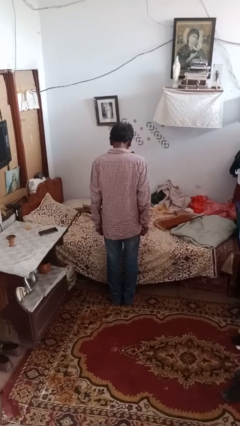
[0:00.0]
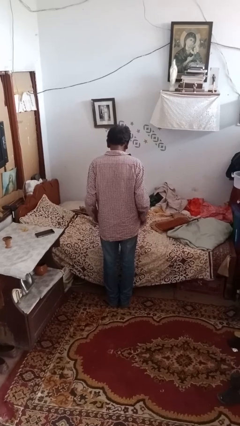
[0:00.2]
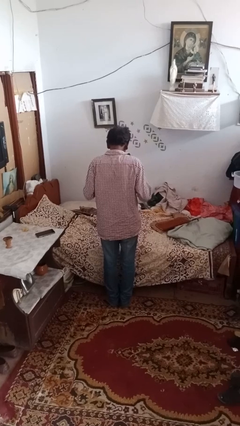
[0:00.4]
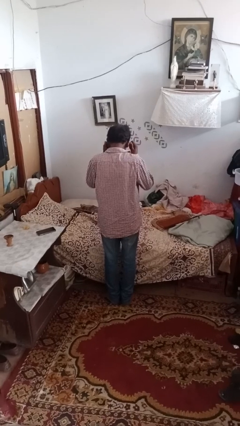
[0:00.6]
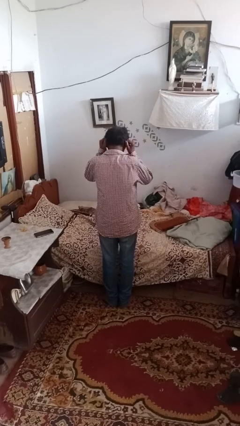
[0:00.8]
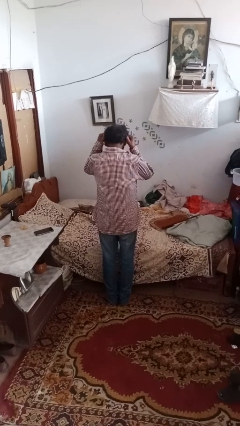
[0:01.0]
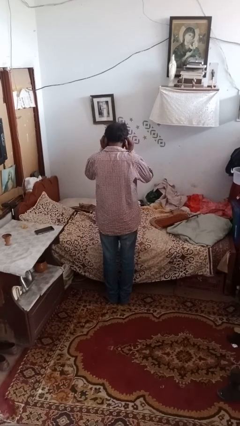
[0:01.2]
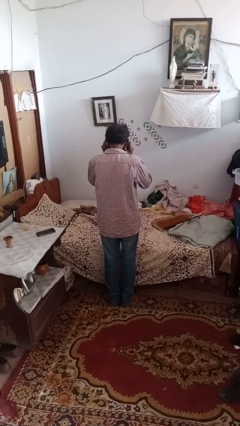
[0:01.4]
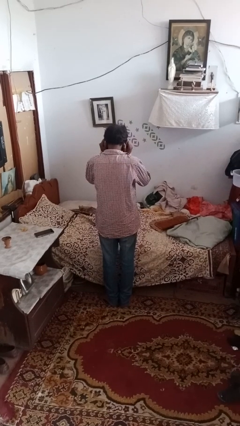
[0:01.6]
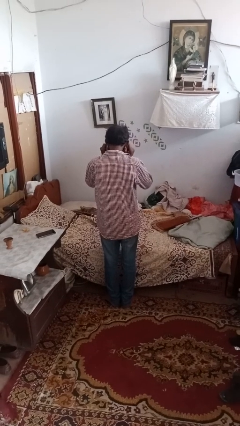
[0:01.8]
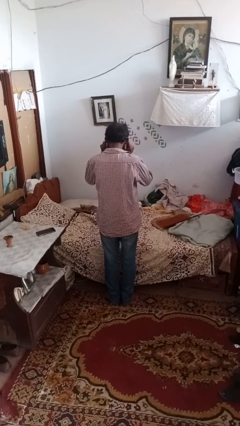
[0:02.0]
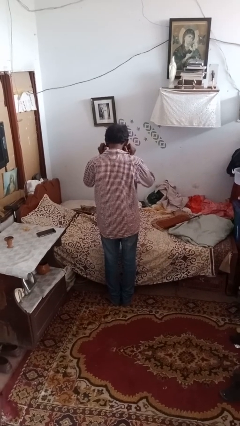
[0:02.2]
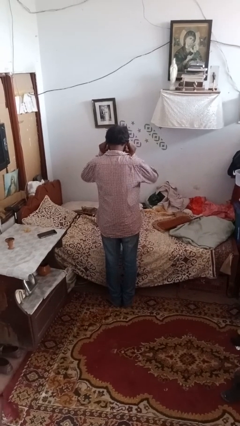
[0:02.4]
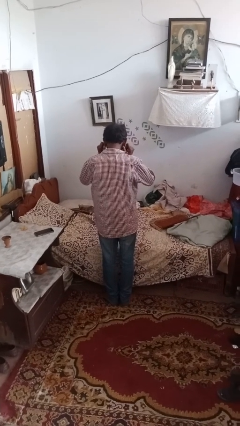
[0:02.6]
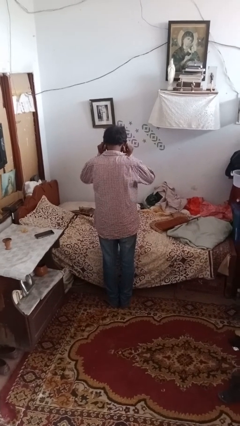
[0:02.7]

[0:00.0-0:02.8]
person touches earlobe

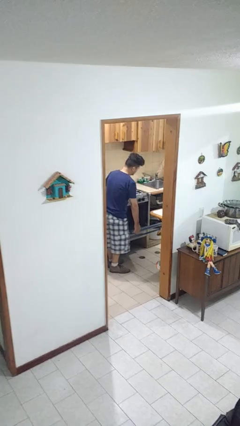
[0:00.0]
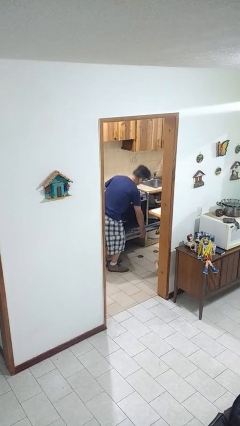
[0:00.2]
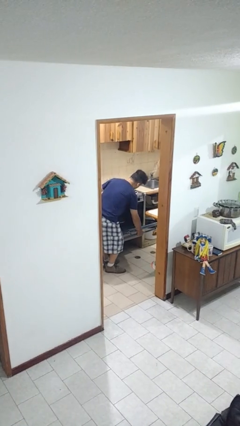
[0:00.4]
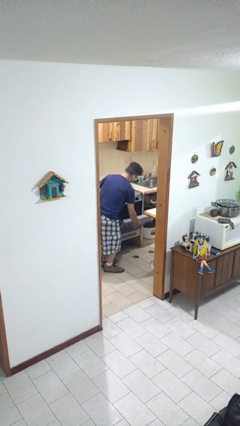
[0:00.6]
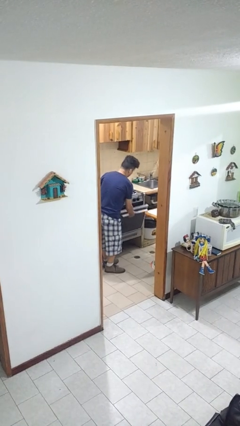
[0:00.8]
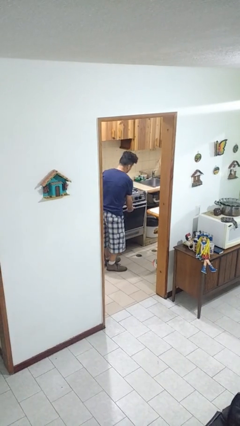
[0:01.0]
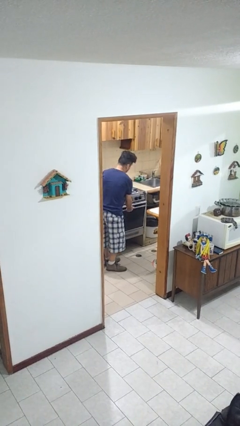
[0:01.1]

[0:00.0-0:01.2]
person closes oven door

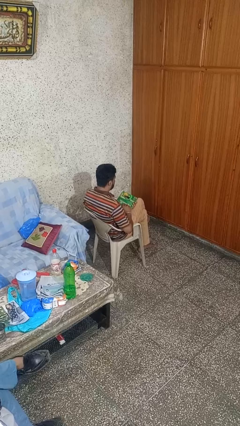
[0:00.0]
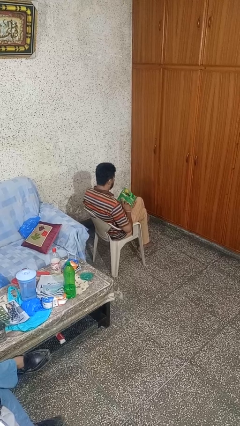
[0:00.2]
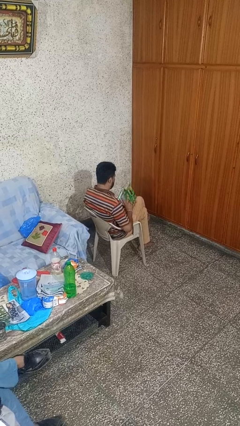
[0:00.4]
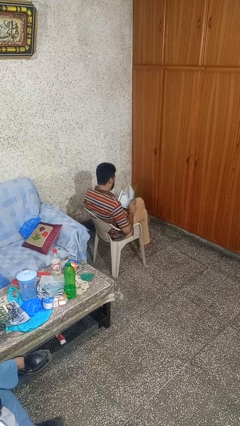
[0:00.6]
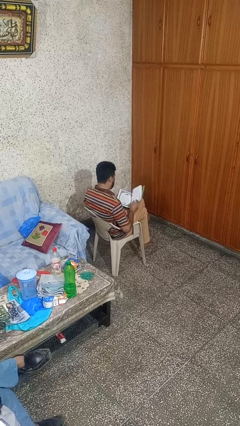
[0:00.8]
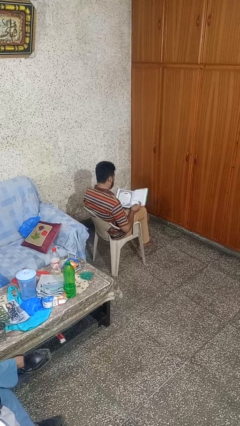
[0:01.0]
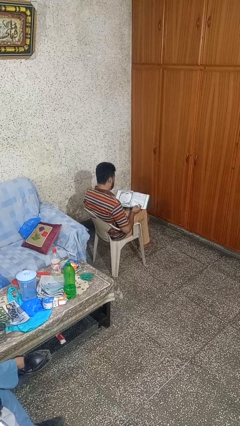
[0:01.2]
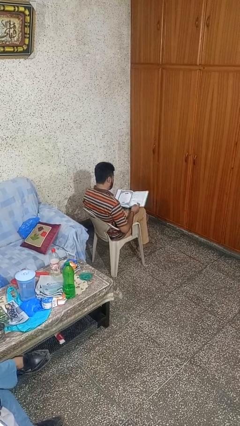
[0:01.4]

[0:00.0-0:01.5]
person reads book

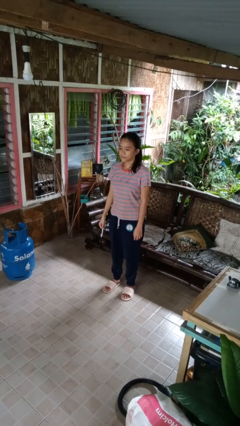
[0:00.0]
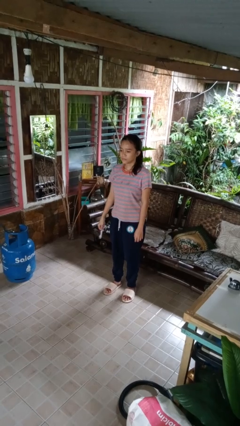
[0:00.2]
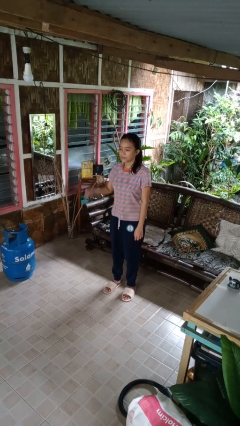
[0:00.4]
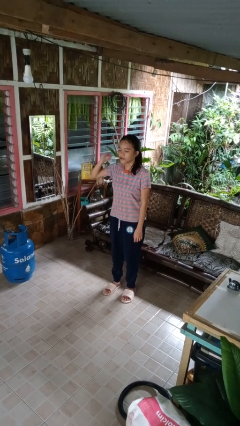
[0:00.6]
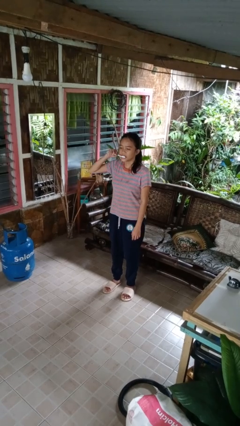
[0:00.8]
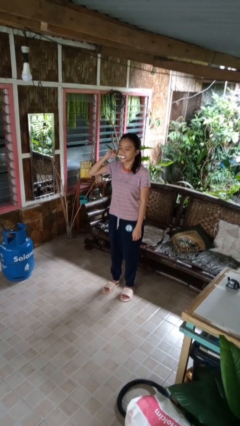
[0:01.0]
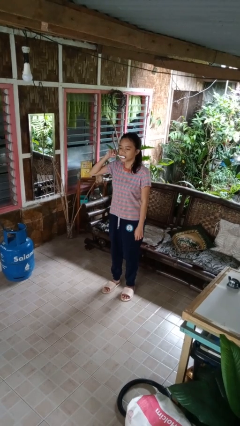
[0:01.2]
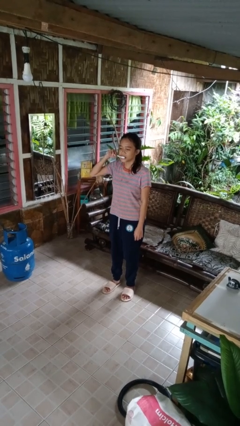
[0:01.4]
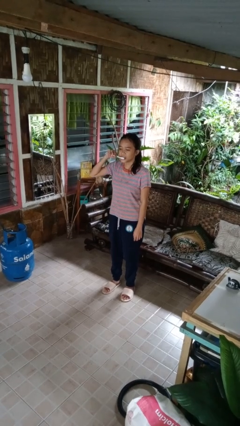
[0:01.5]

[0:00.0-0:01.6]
person brushes teeth

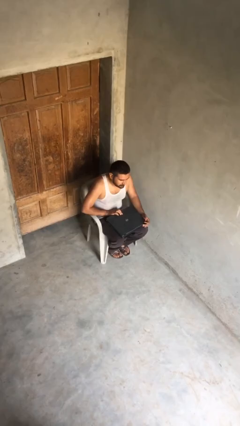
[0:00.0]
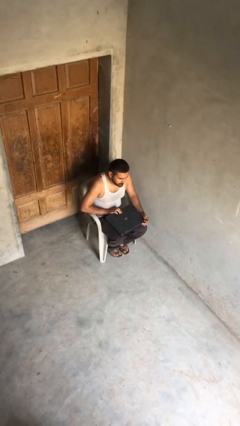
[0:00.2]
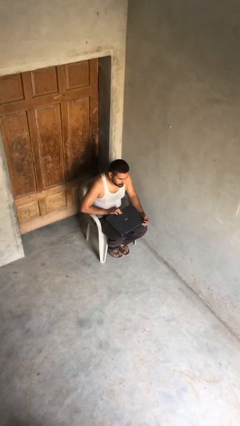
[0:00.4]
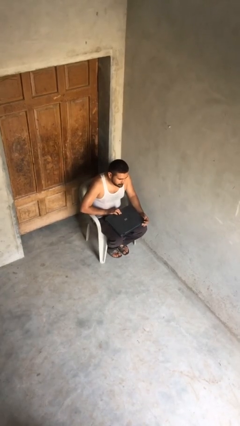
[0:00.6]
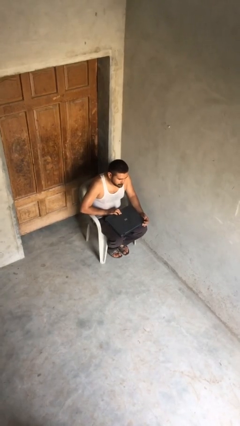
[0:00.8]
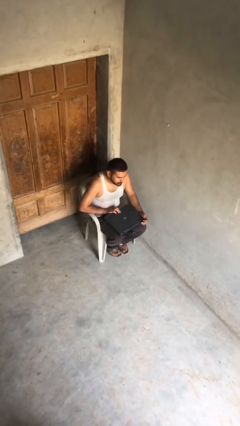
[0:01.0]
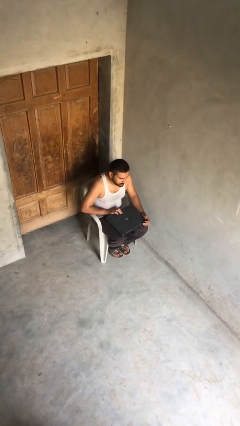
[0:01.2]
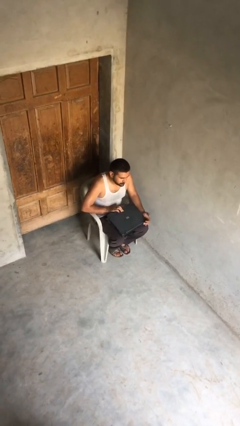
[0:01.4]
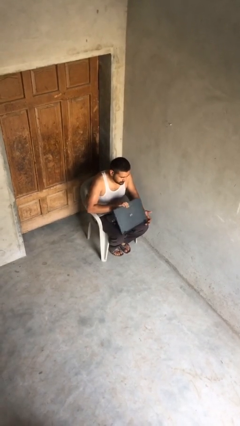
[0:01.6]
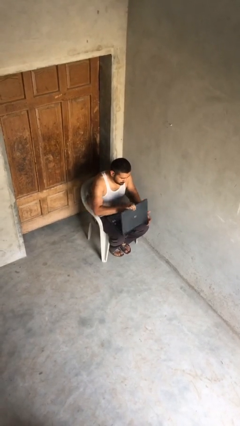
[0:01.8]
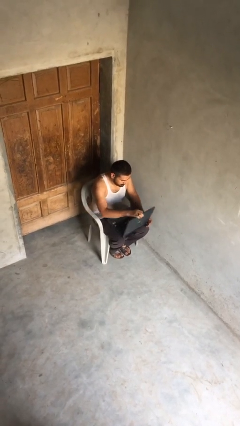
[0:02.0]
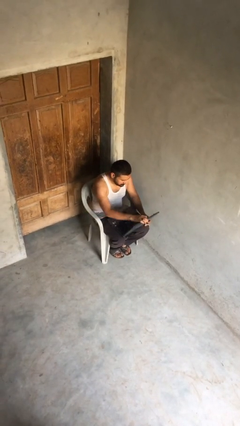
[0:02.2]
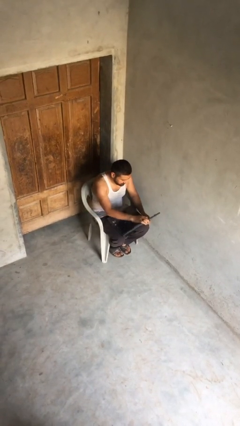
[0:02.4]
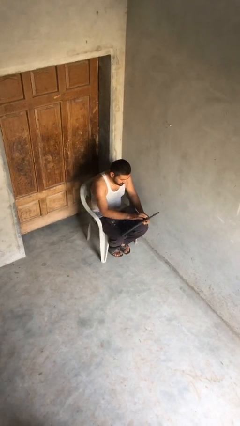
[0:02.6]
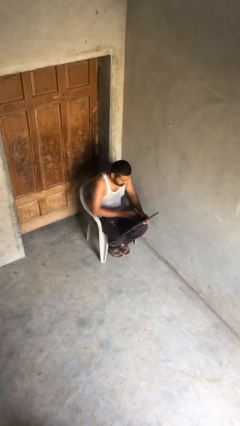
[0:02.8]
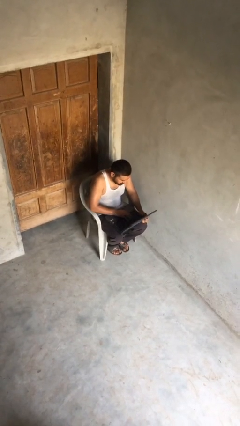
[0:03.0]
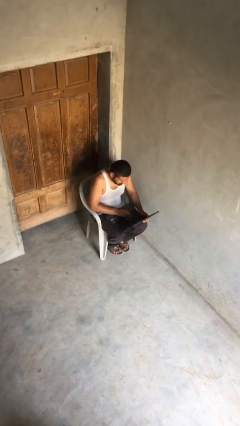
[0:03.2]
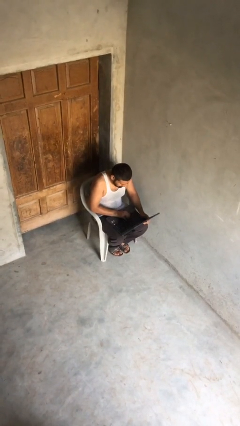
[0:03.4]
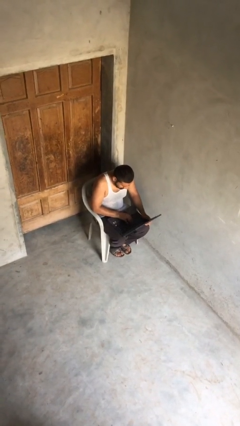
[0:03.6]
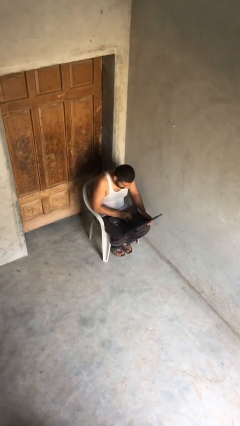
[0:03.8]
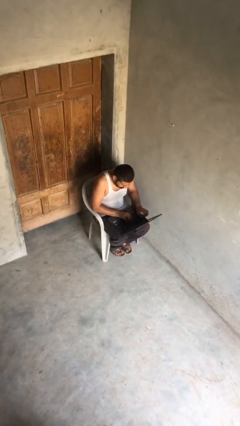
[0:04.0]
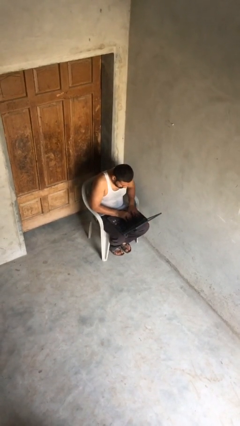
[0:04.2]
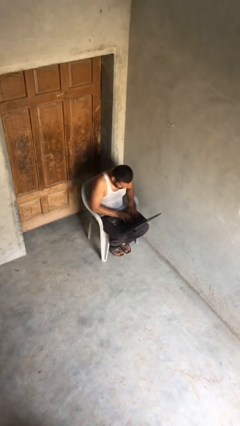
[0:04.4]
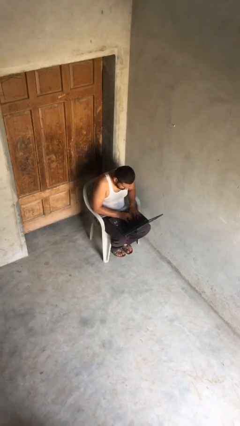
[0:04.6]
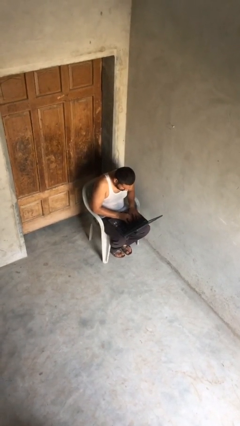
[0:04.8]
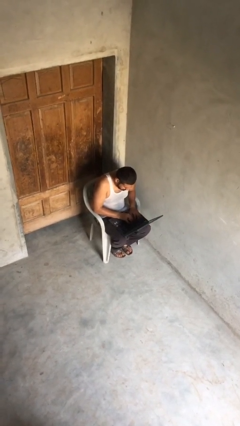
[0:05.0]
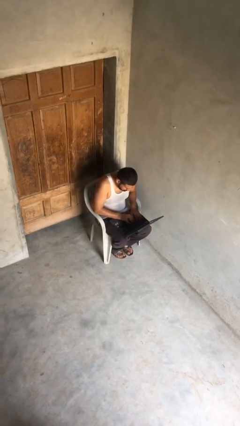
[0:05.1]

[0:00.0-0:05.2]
person interacts with laptop

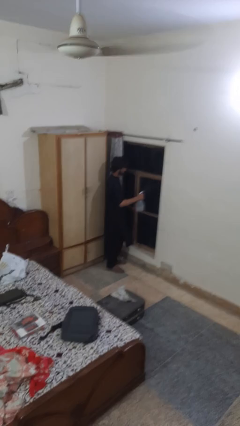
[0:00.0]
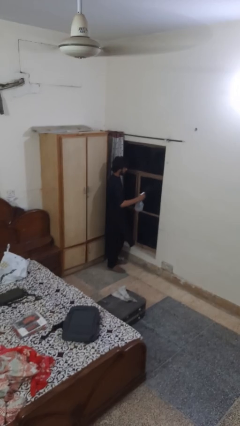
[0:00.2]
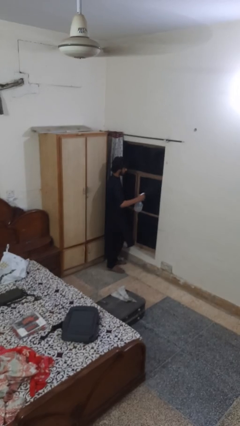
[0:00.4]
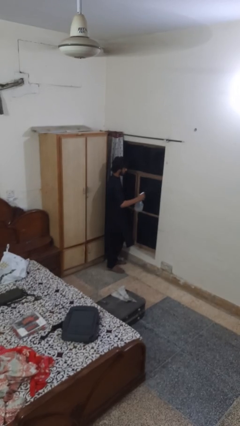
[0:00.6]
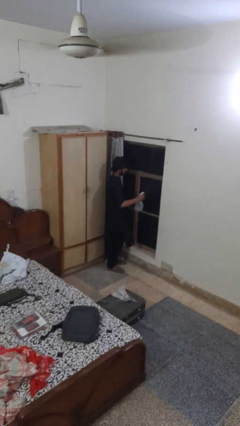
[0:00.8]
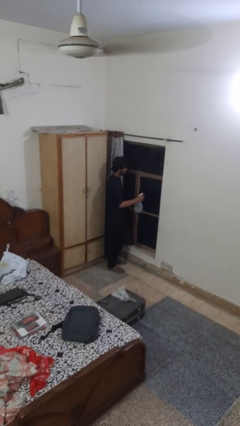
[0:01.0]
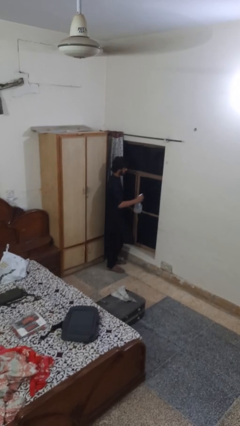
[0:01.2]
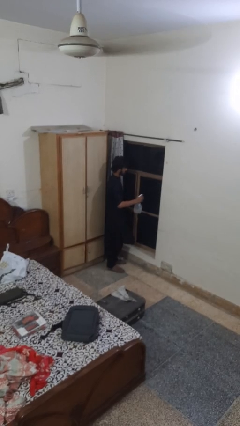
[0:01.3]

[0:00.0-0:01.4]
person sprays from bottle

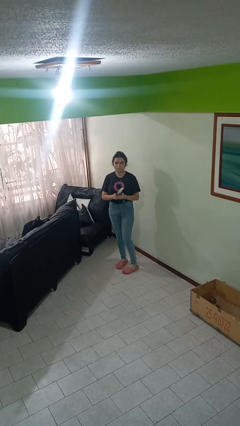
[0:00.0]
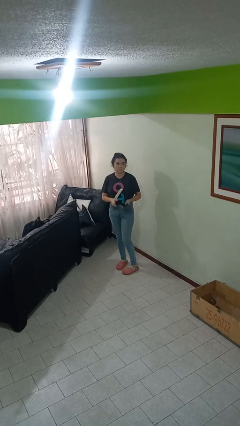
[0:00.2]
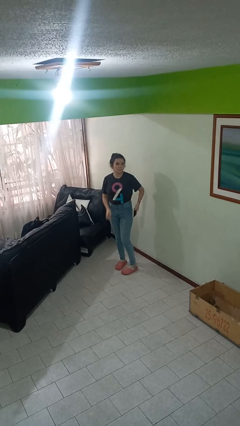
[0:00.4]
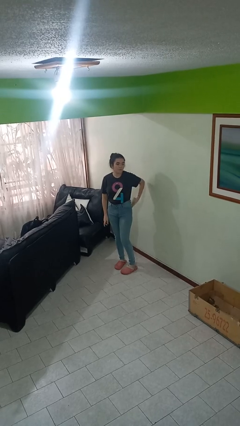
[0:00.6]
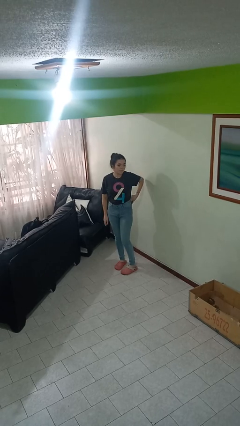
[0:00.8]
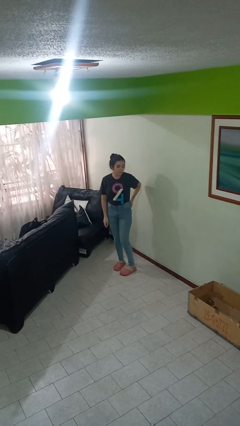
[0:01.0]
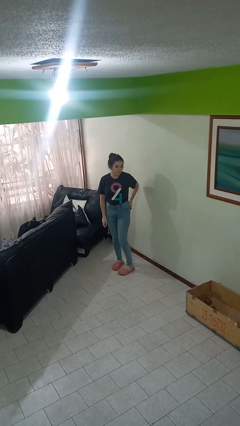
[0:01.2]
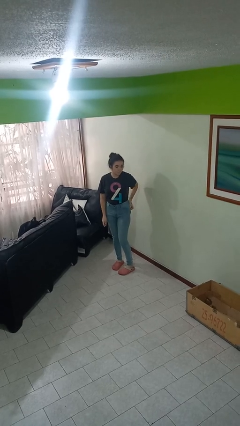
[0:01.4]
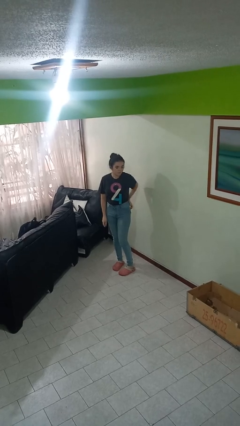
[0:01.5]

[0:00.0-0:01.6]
person puts phone into pocket

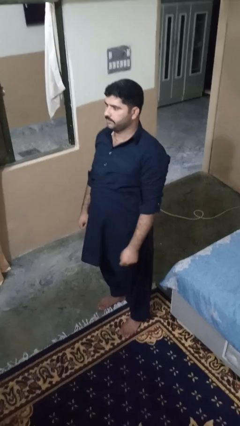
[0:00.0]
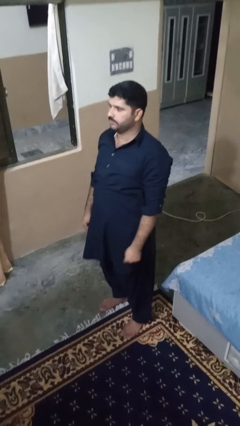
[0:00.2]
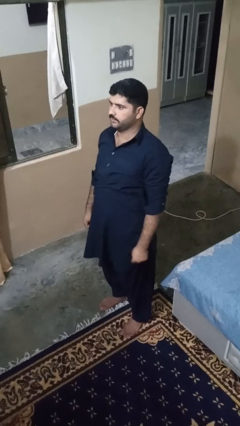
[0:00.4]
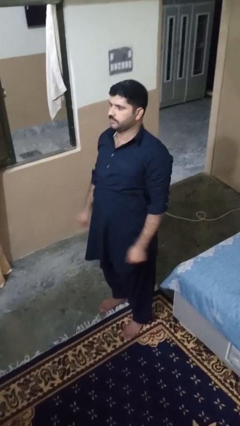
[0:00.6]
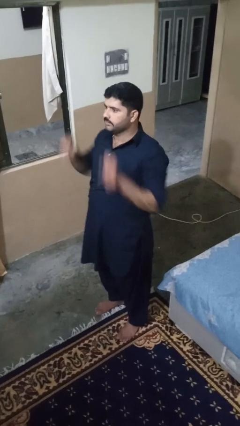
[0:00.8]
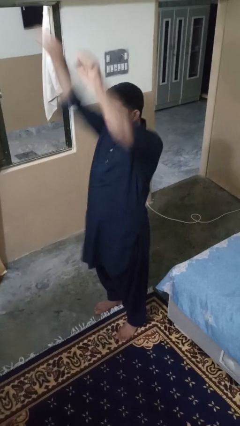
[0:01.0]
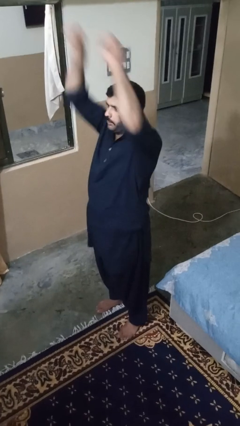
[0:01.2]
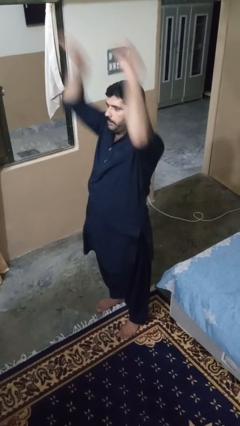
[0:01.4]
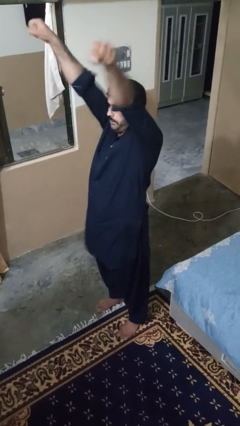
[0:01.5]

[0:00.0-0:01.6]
person punches

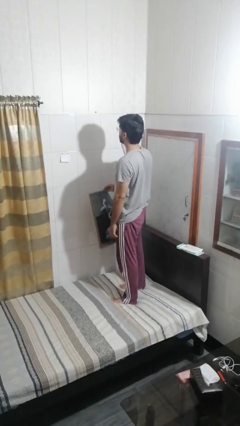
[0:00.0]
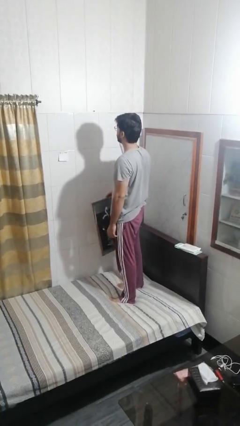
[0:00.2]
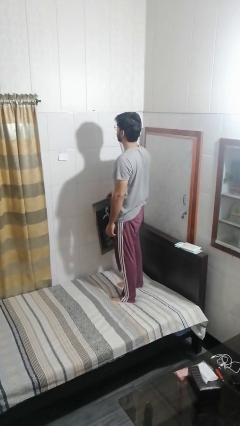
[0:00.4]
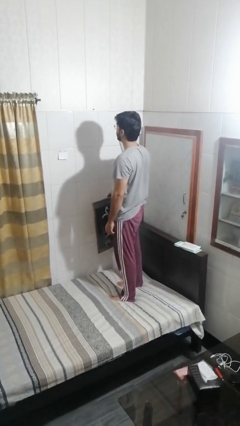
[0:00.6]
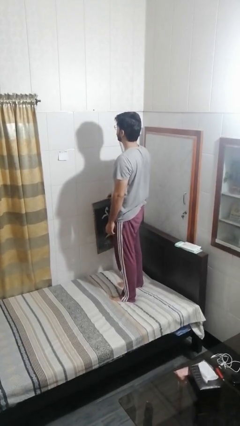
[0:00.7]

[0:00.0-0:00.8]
person takes down picture frame
